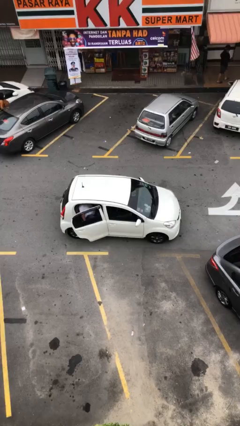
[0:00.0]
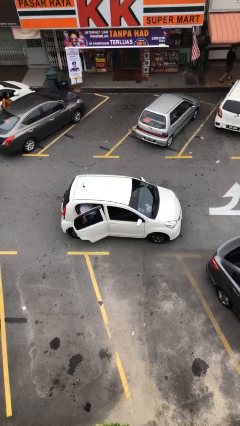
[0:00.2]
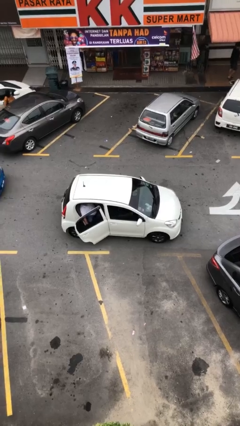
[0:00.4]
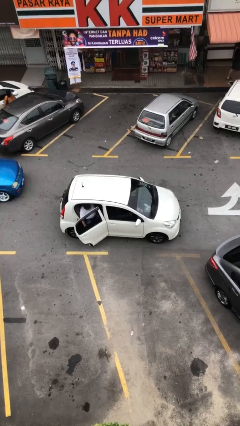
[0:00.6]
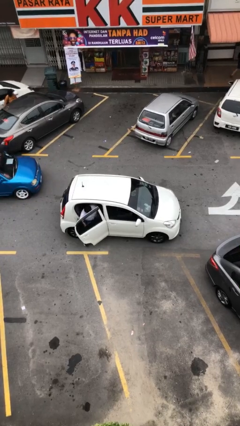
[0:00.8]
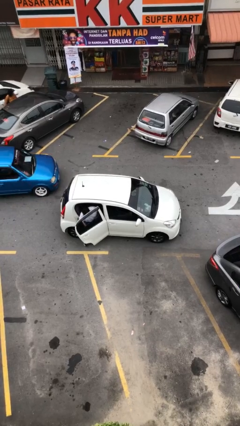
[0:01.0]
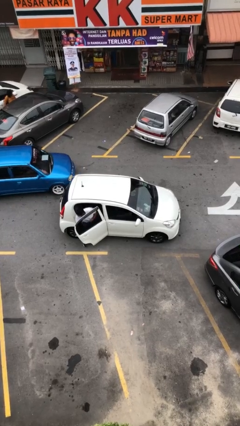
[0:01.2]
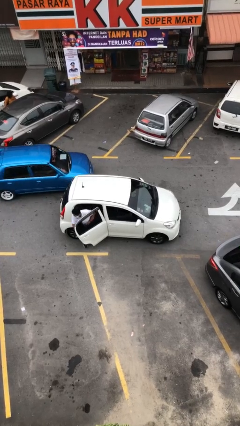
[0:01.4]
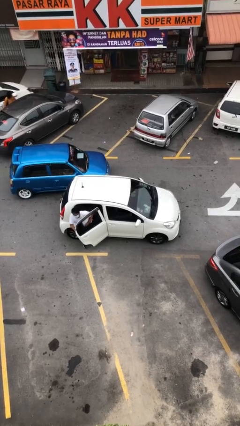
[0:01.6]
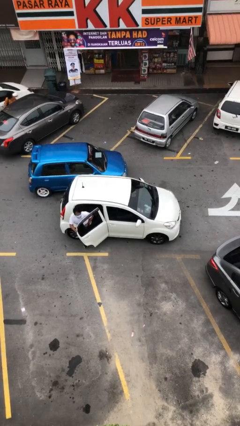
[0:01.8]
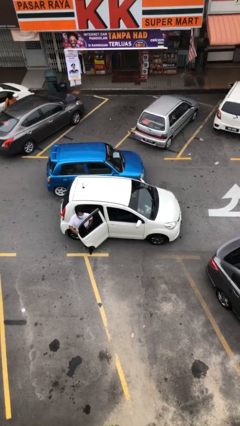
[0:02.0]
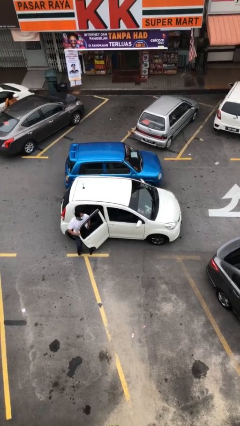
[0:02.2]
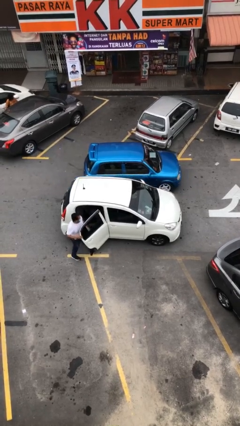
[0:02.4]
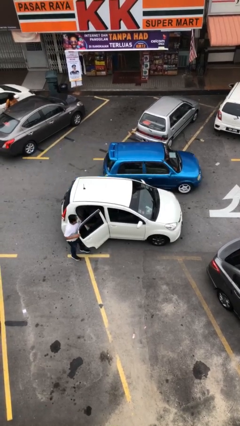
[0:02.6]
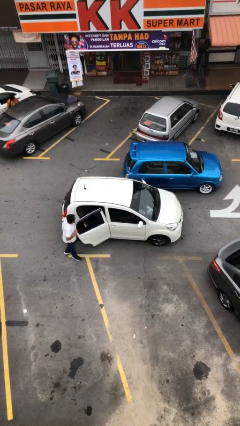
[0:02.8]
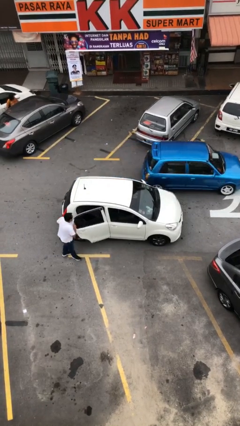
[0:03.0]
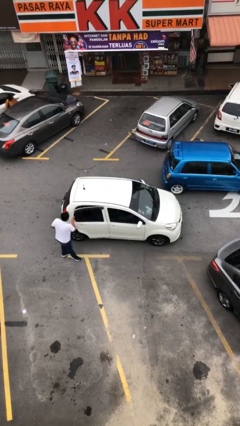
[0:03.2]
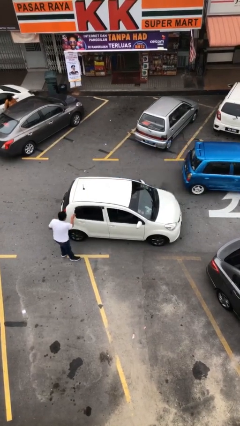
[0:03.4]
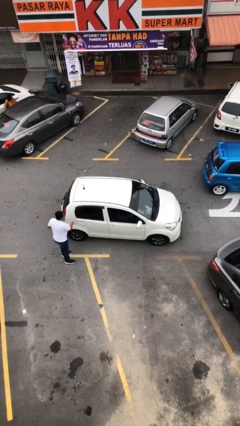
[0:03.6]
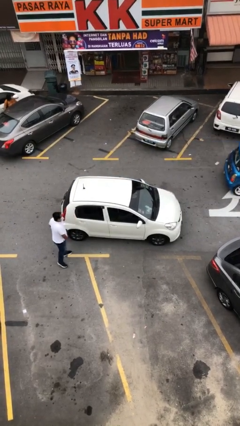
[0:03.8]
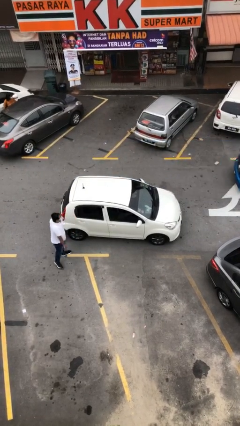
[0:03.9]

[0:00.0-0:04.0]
car drops off person

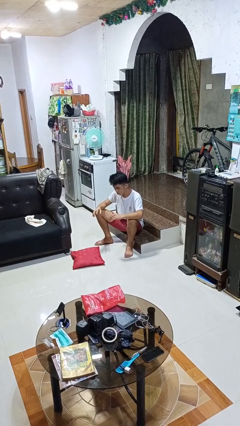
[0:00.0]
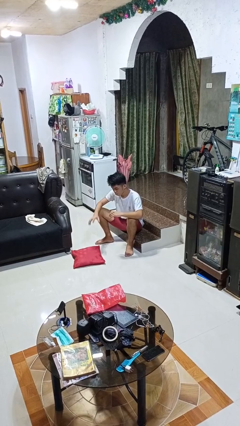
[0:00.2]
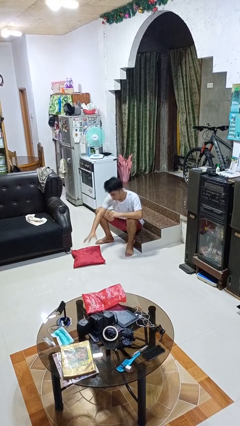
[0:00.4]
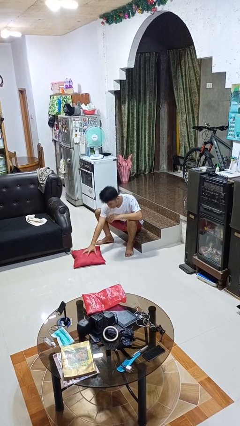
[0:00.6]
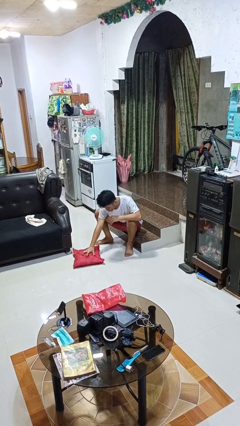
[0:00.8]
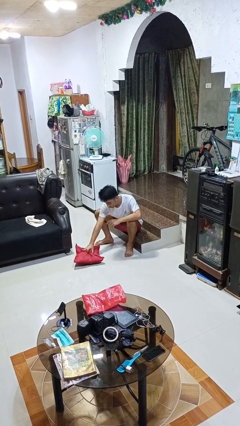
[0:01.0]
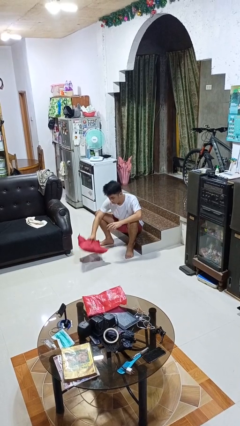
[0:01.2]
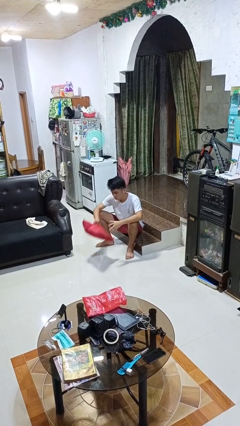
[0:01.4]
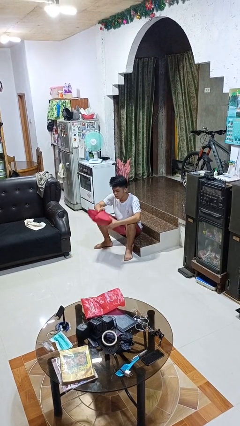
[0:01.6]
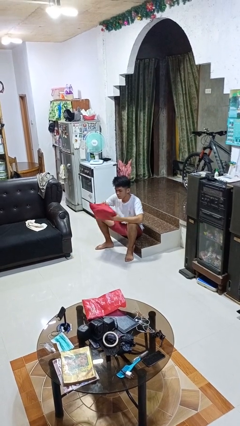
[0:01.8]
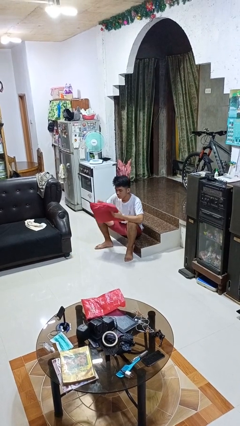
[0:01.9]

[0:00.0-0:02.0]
person picks up object from floor

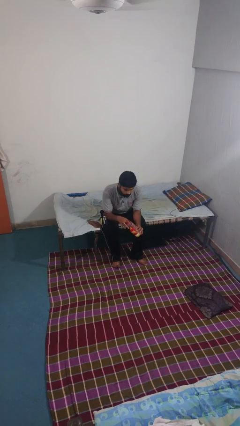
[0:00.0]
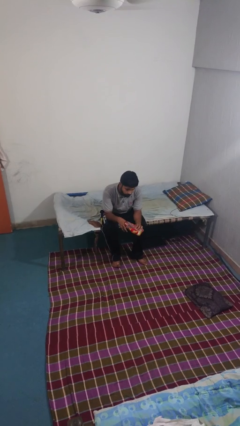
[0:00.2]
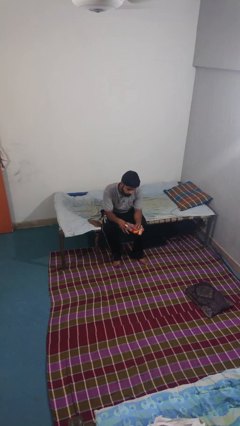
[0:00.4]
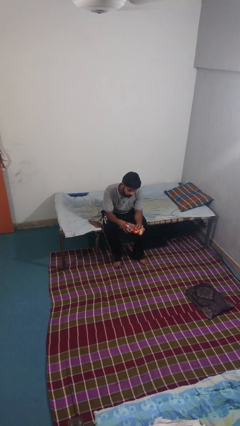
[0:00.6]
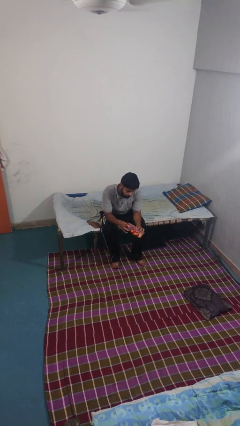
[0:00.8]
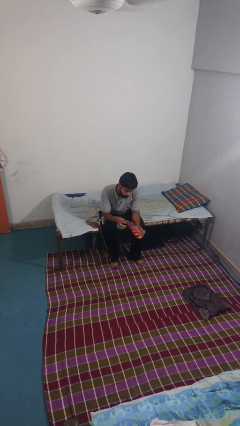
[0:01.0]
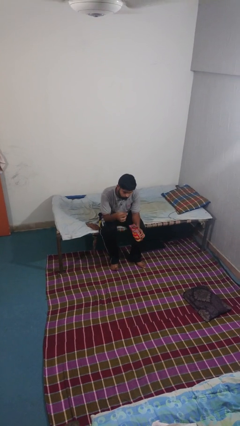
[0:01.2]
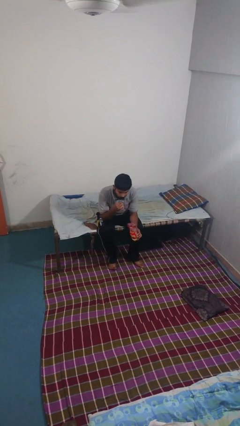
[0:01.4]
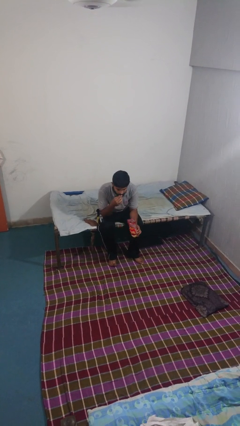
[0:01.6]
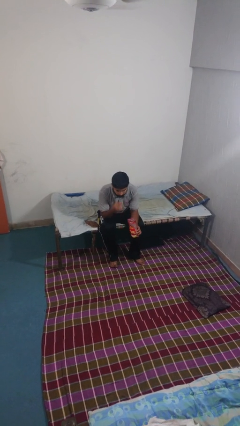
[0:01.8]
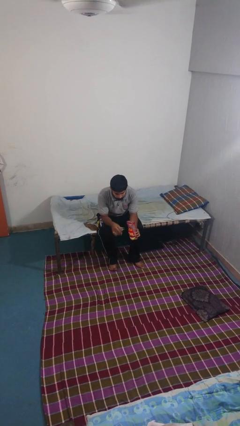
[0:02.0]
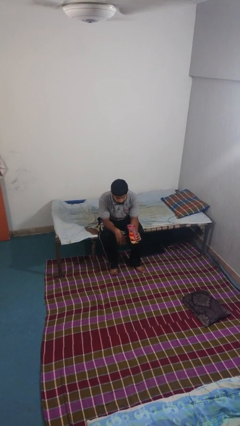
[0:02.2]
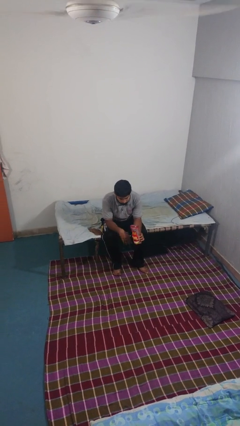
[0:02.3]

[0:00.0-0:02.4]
person eats snack from bag

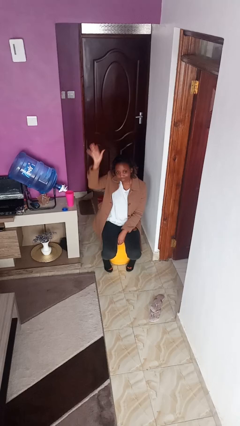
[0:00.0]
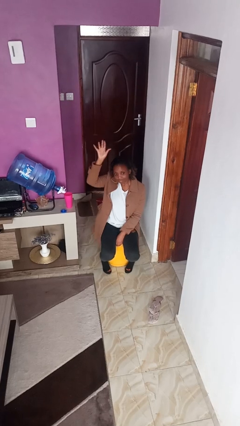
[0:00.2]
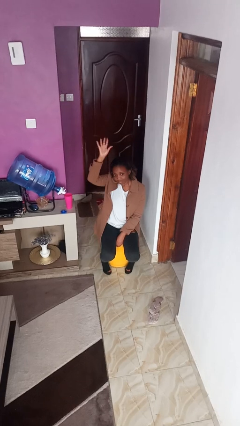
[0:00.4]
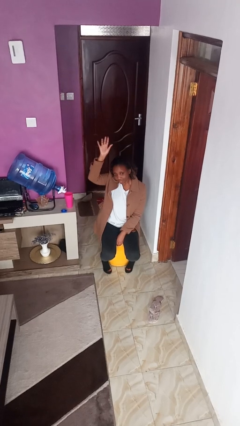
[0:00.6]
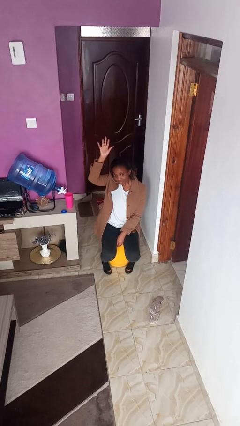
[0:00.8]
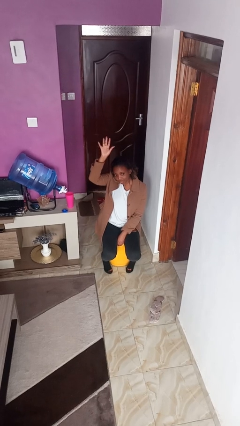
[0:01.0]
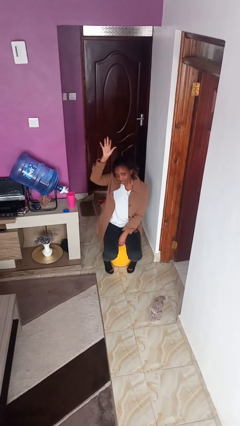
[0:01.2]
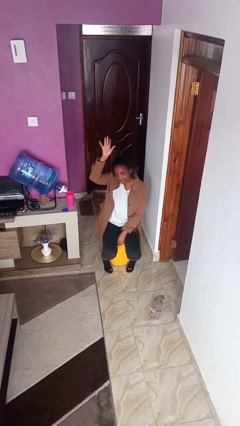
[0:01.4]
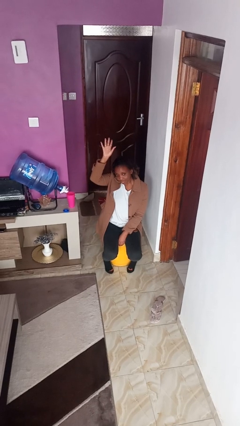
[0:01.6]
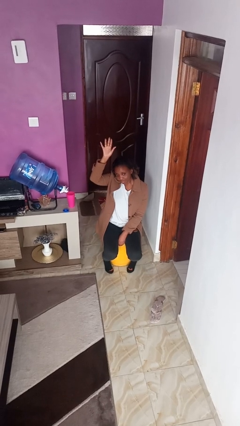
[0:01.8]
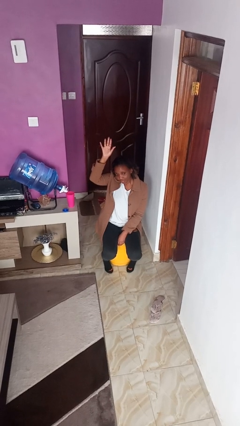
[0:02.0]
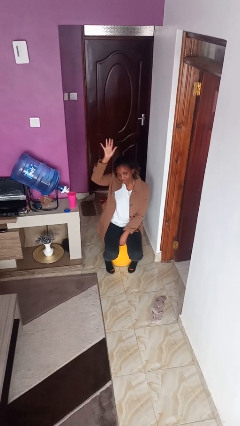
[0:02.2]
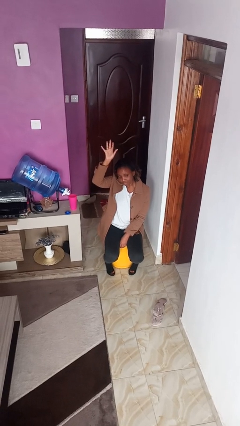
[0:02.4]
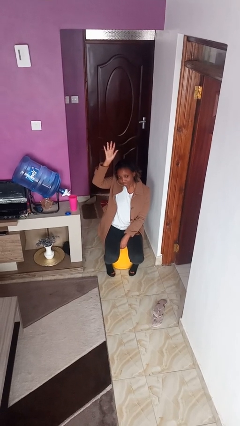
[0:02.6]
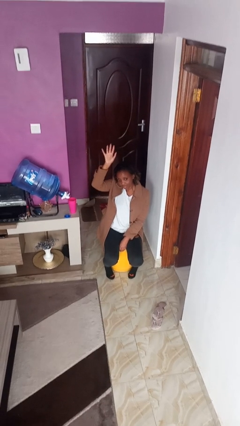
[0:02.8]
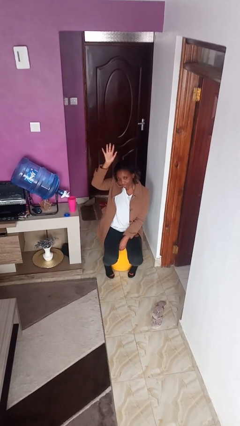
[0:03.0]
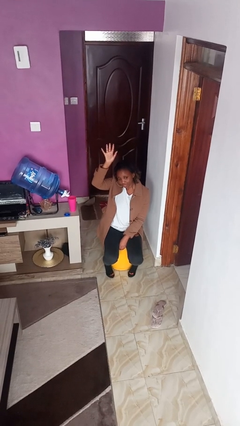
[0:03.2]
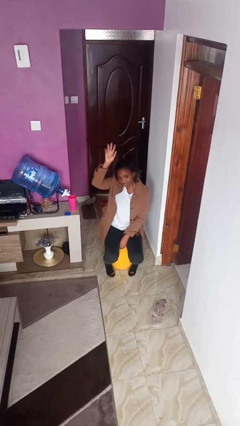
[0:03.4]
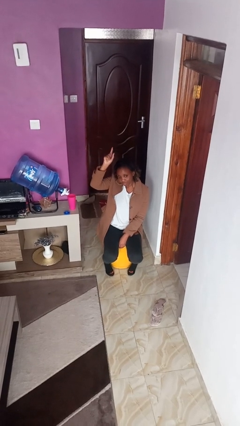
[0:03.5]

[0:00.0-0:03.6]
person gestures raise hand

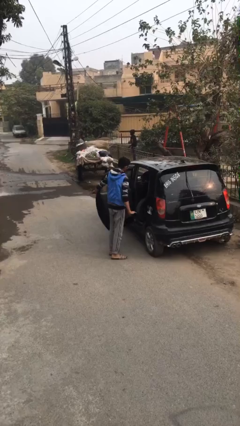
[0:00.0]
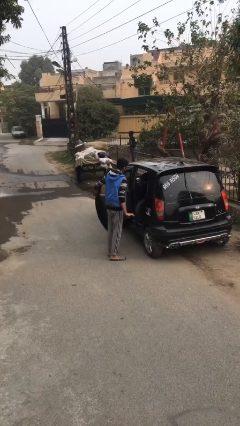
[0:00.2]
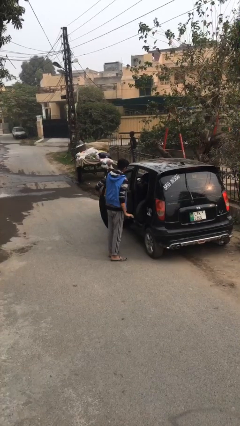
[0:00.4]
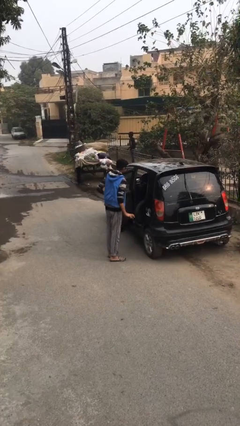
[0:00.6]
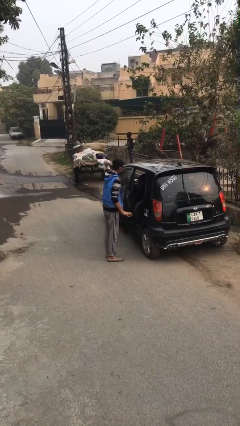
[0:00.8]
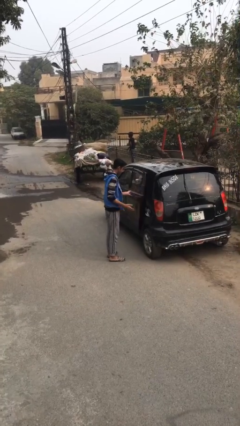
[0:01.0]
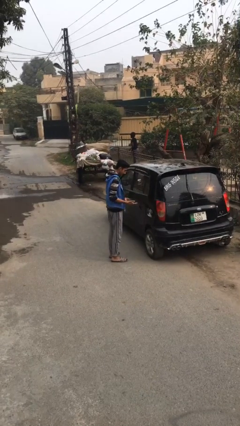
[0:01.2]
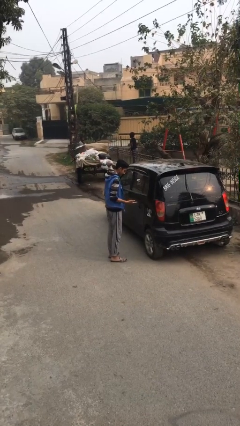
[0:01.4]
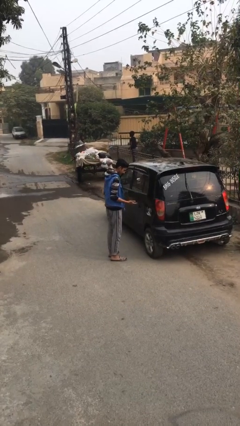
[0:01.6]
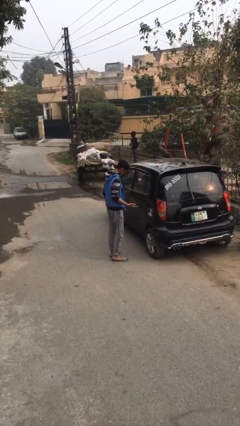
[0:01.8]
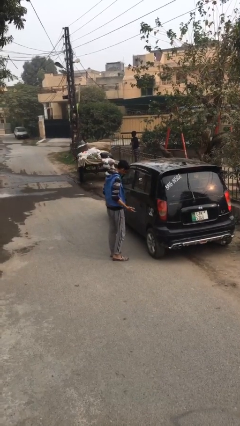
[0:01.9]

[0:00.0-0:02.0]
person closes car door

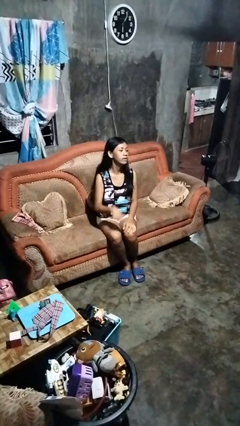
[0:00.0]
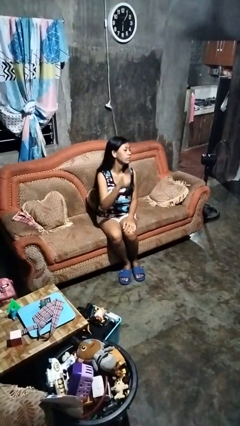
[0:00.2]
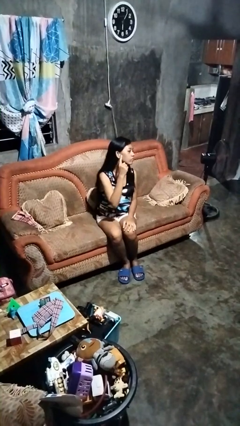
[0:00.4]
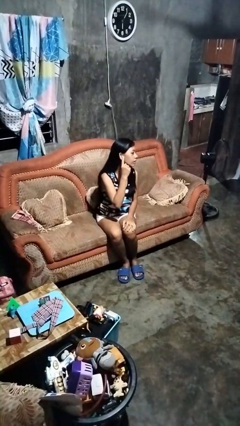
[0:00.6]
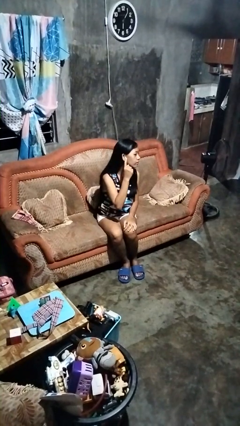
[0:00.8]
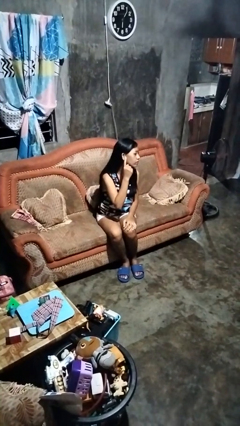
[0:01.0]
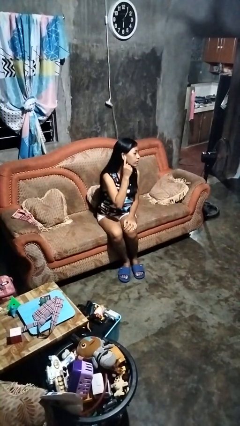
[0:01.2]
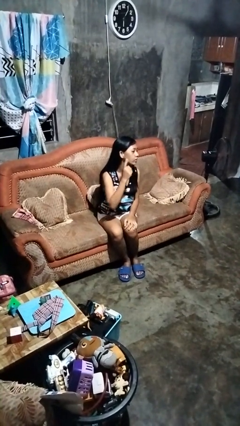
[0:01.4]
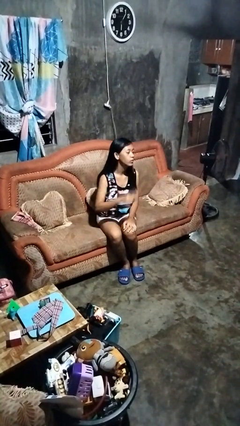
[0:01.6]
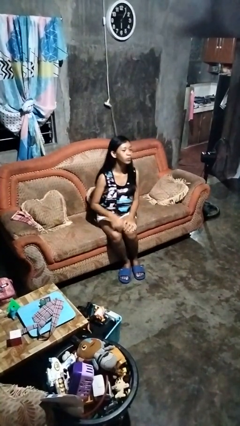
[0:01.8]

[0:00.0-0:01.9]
person gestures listen closely

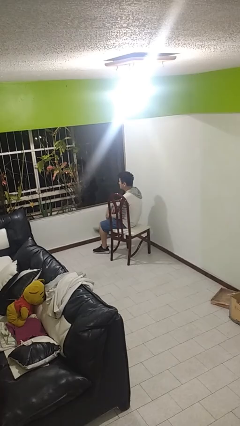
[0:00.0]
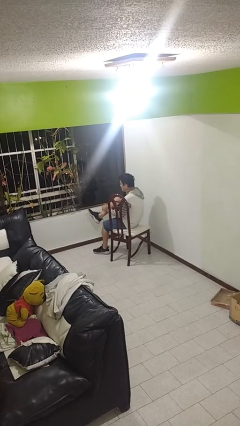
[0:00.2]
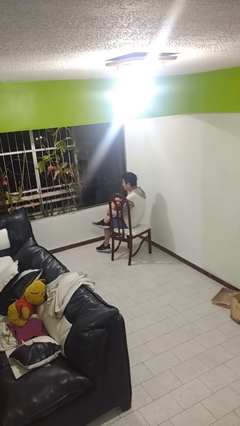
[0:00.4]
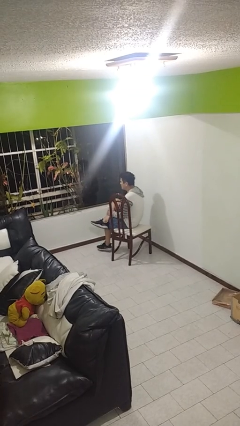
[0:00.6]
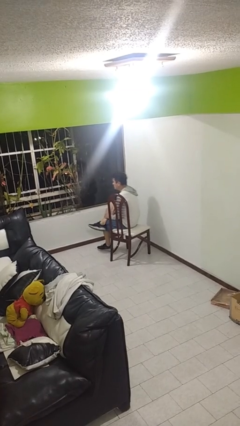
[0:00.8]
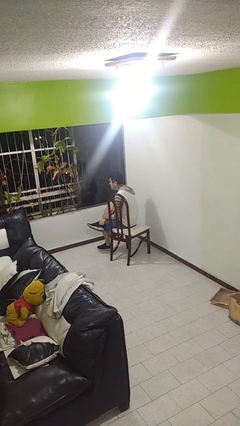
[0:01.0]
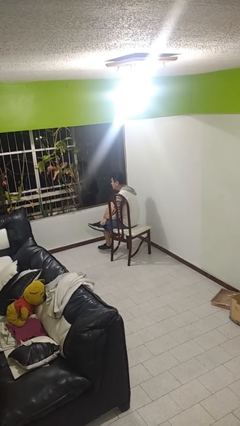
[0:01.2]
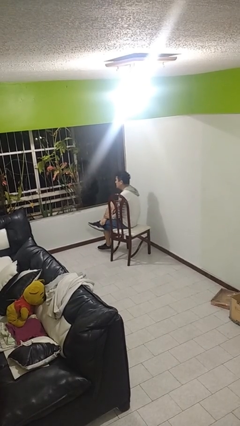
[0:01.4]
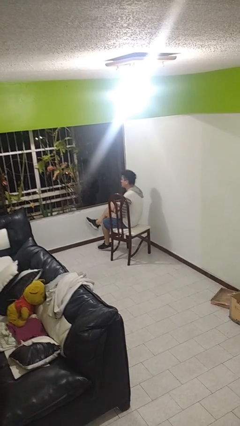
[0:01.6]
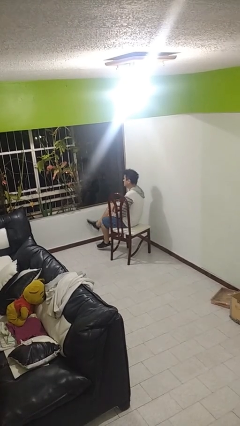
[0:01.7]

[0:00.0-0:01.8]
person crosses legs
